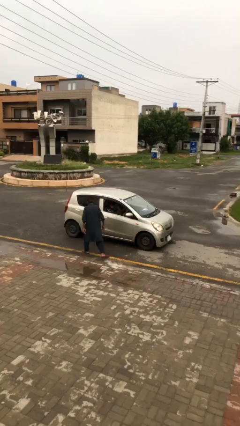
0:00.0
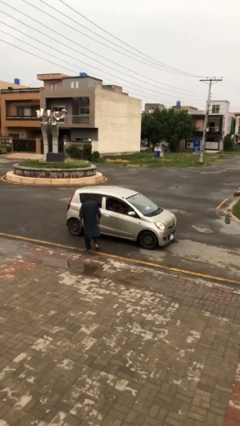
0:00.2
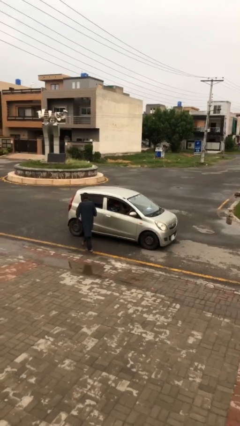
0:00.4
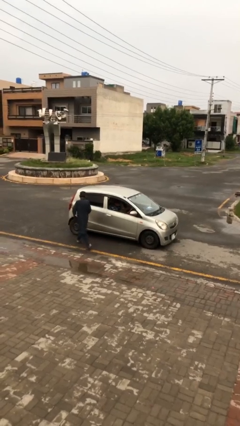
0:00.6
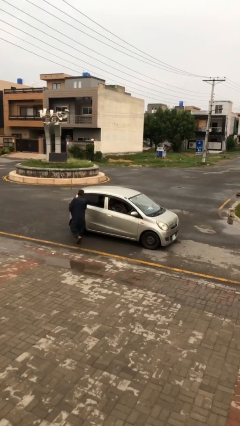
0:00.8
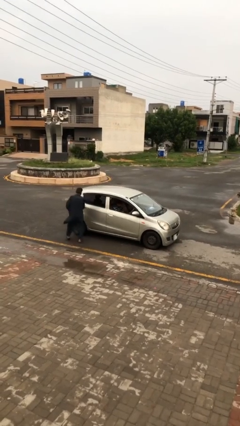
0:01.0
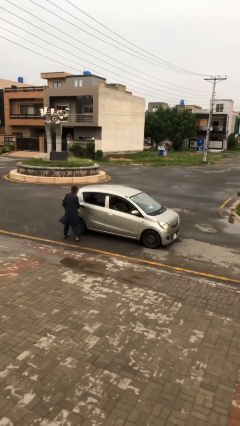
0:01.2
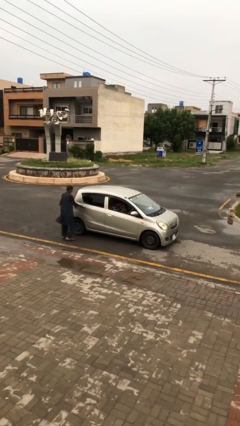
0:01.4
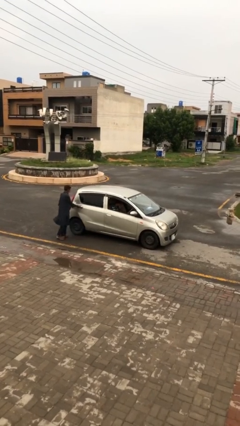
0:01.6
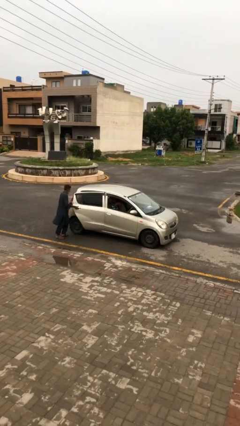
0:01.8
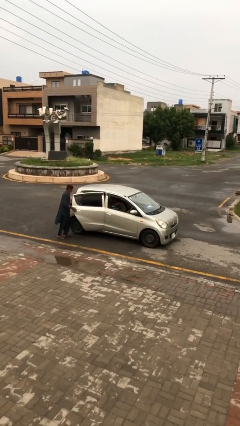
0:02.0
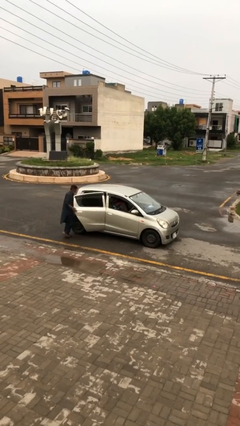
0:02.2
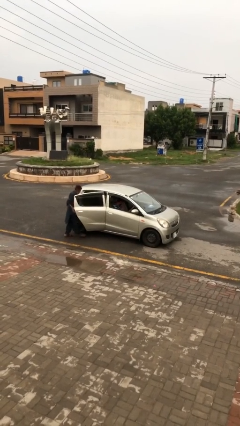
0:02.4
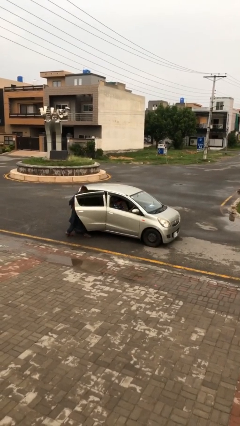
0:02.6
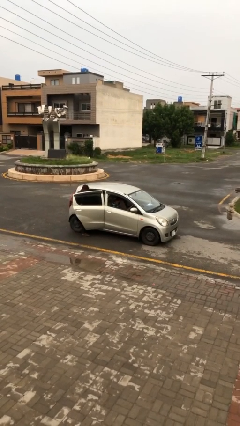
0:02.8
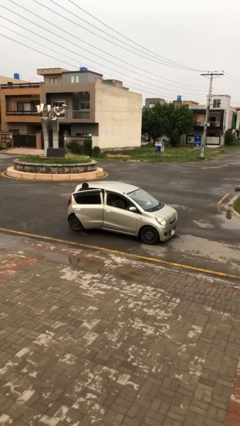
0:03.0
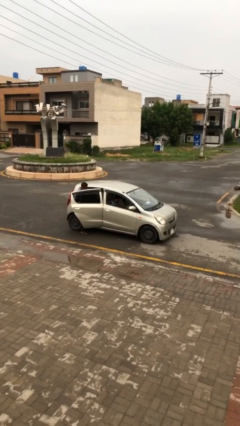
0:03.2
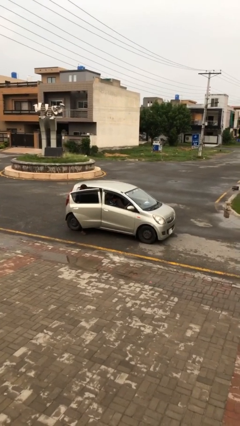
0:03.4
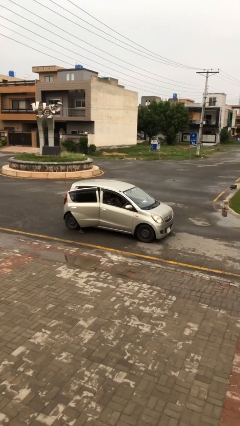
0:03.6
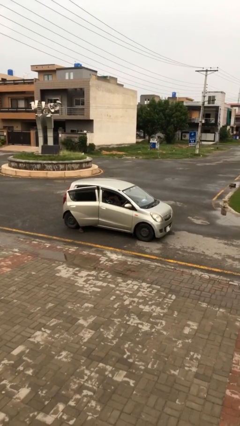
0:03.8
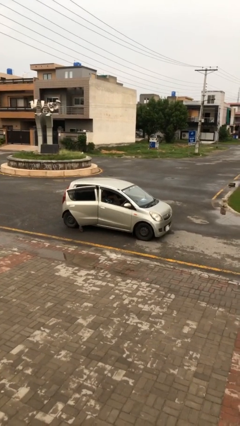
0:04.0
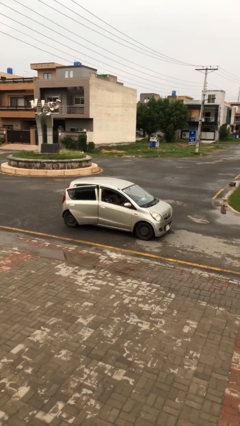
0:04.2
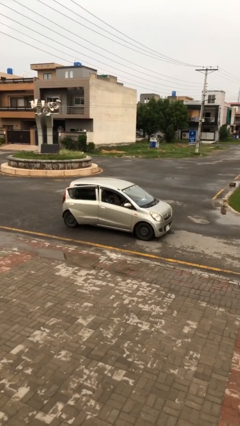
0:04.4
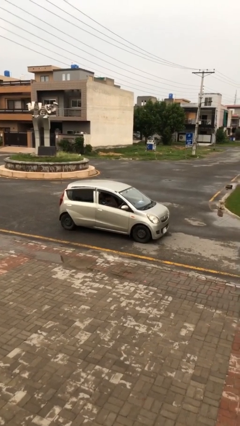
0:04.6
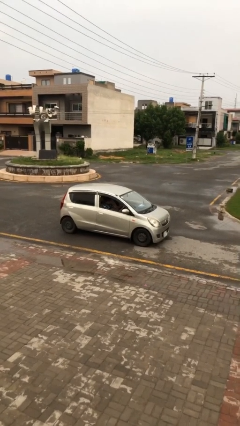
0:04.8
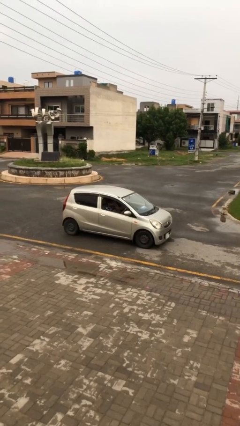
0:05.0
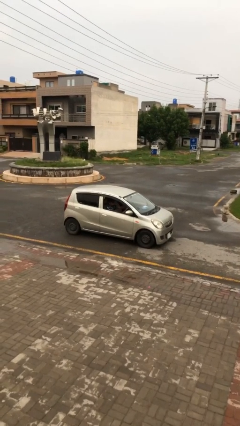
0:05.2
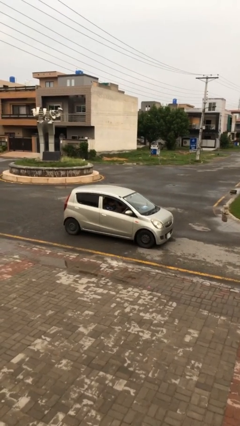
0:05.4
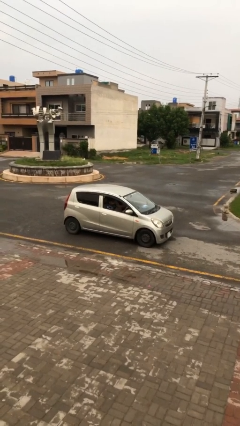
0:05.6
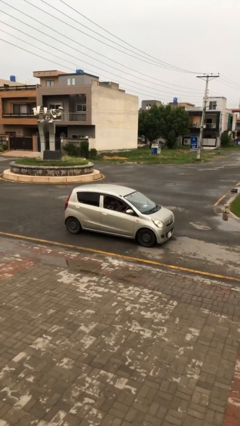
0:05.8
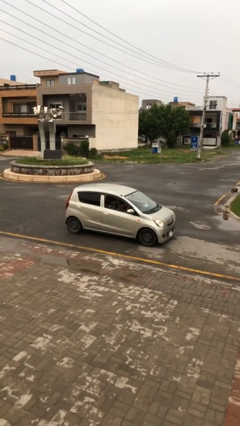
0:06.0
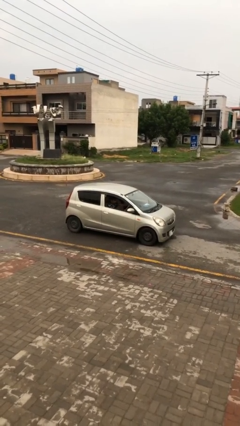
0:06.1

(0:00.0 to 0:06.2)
car picks up person

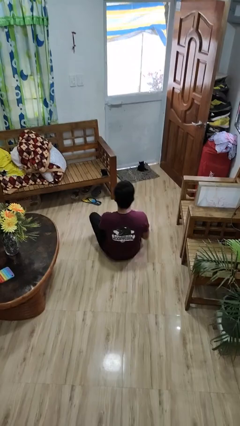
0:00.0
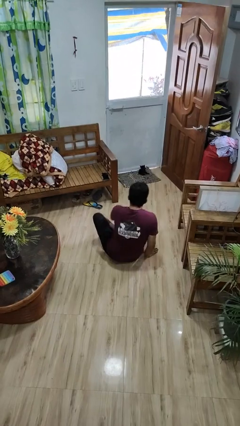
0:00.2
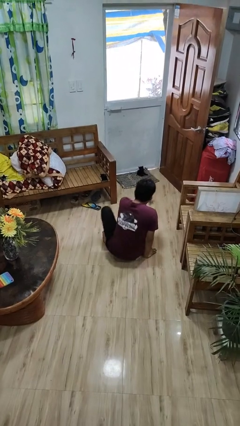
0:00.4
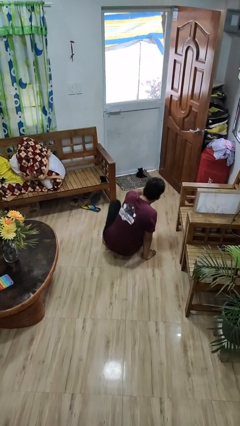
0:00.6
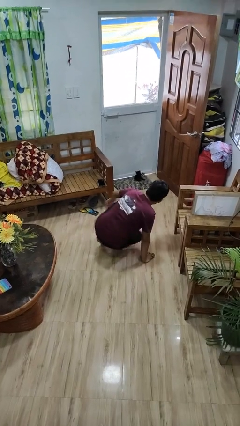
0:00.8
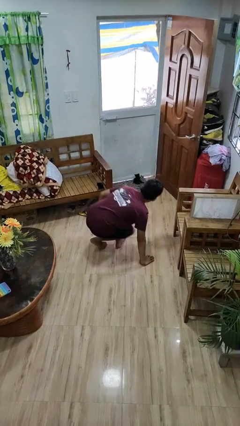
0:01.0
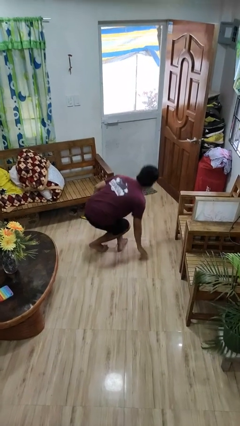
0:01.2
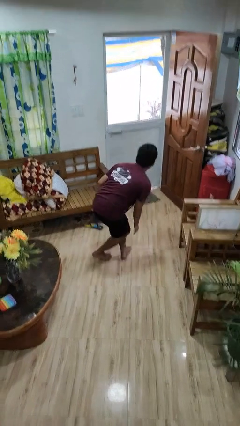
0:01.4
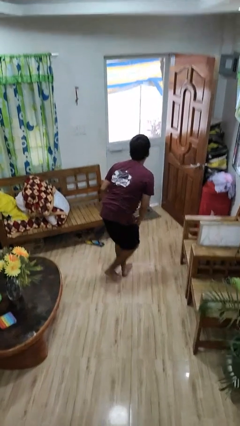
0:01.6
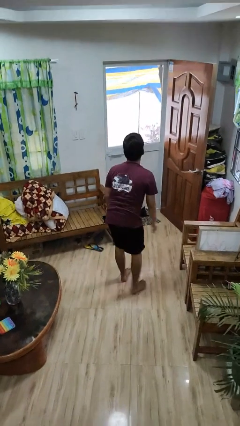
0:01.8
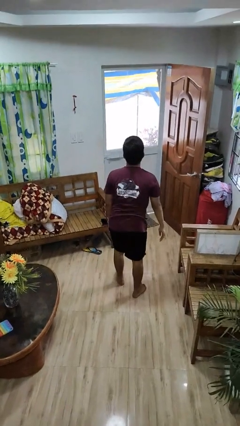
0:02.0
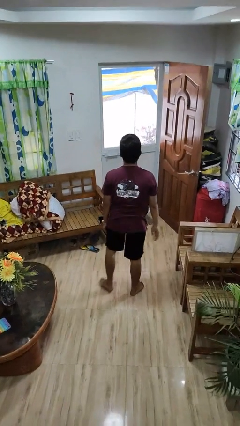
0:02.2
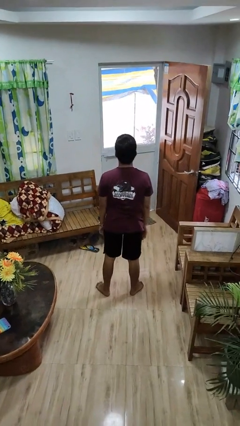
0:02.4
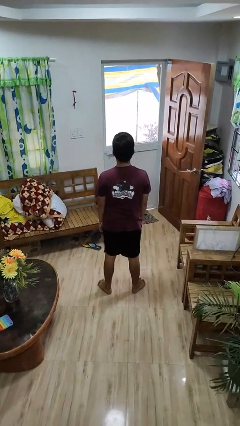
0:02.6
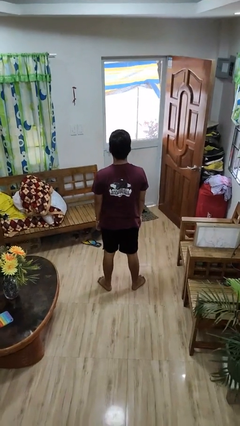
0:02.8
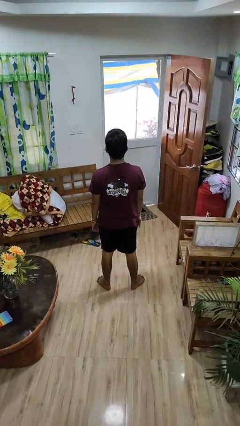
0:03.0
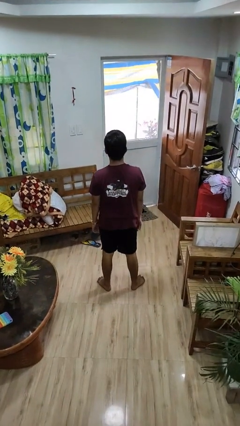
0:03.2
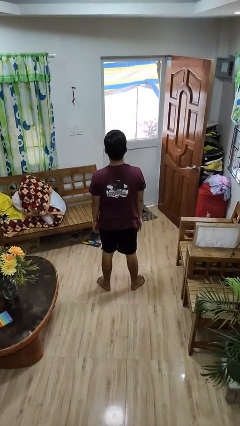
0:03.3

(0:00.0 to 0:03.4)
person stands up from floor

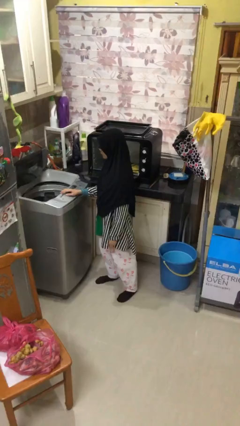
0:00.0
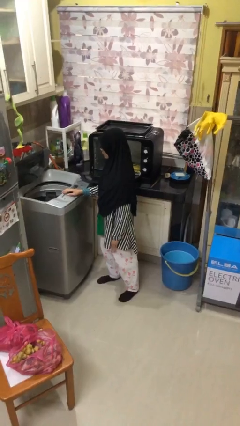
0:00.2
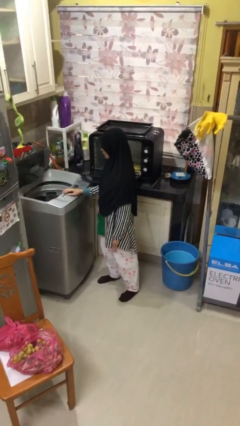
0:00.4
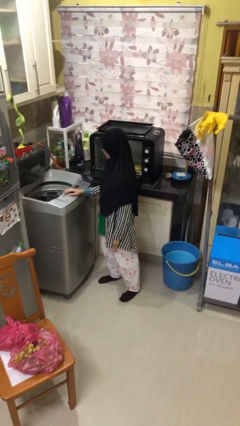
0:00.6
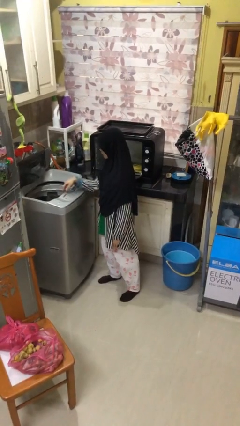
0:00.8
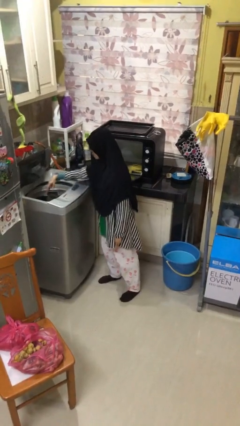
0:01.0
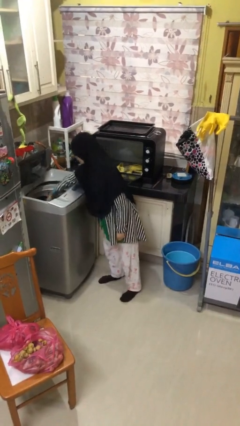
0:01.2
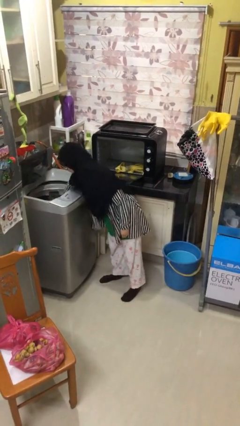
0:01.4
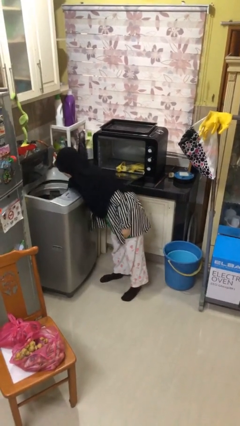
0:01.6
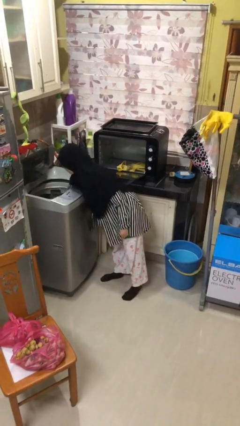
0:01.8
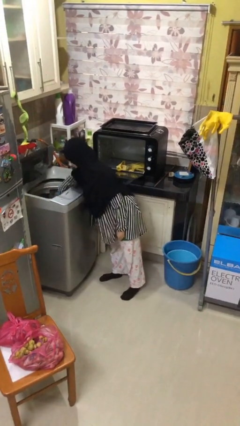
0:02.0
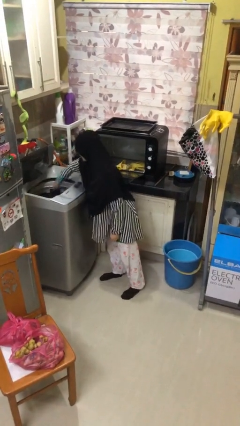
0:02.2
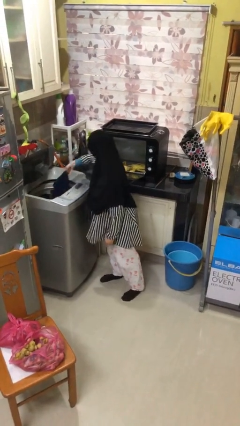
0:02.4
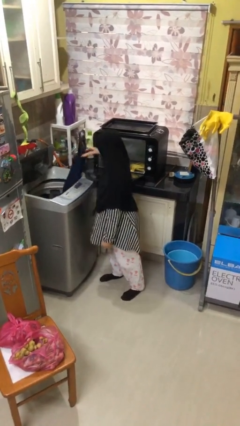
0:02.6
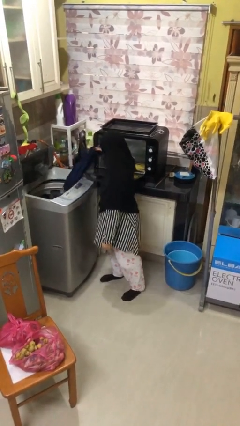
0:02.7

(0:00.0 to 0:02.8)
person unloads clotheswasher

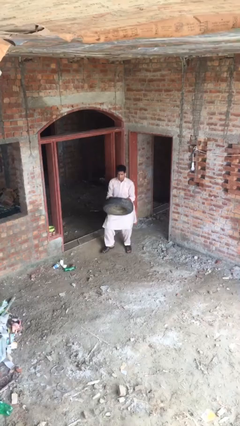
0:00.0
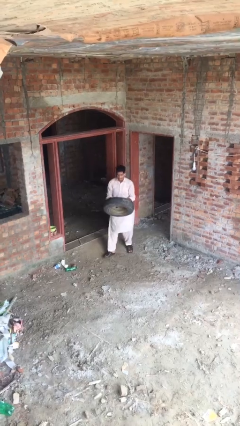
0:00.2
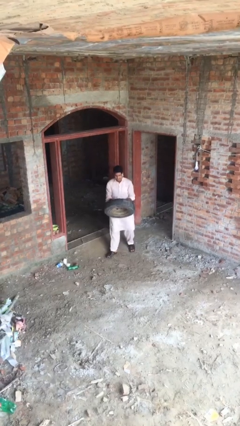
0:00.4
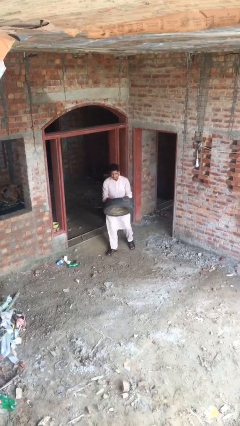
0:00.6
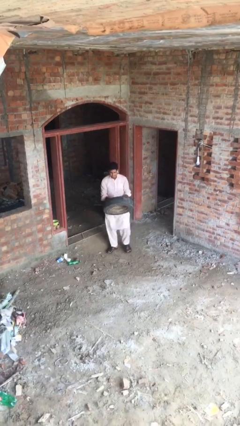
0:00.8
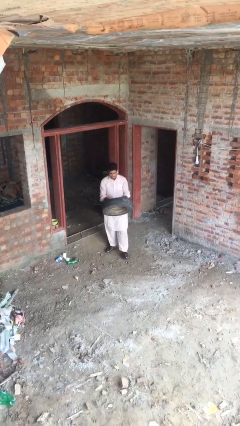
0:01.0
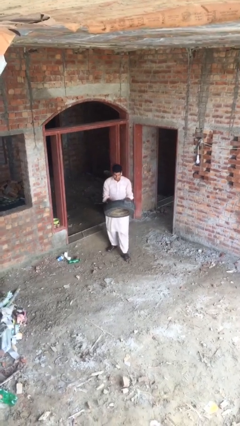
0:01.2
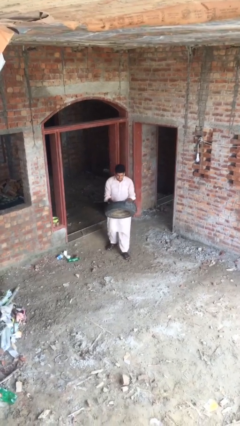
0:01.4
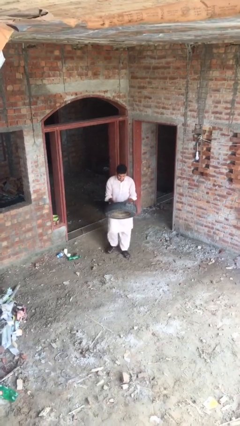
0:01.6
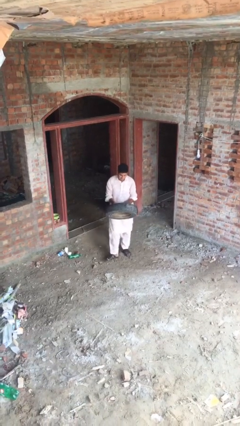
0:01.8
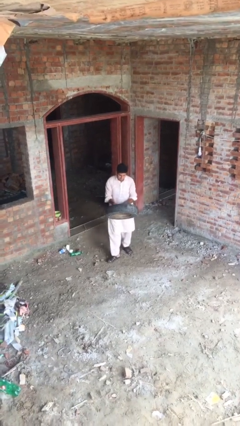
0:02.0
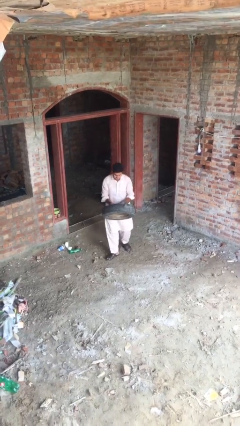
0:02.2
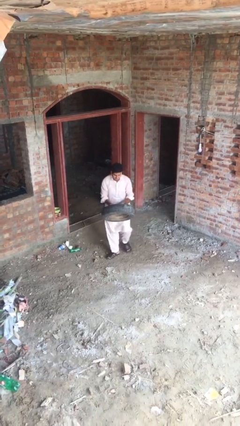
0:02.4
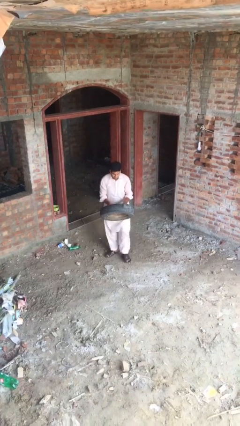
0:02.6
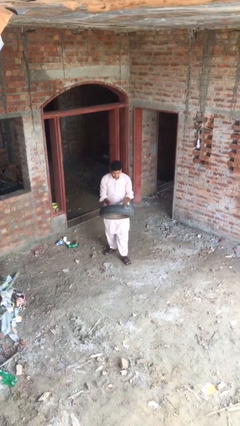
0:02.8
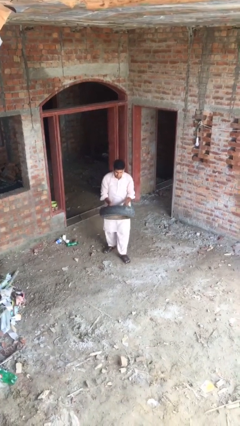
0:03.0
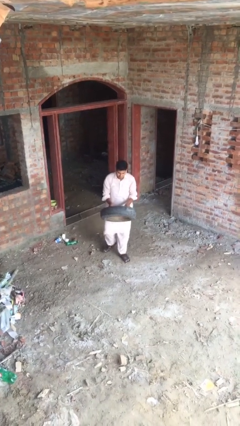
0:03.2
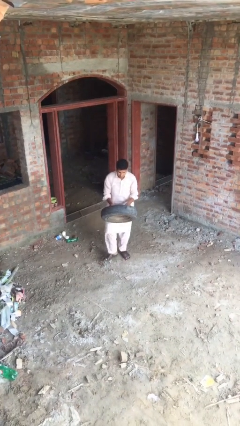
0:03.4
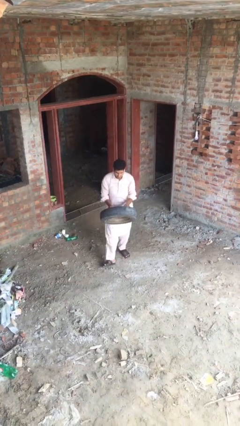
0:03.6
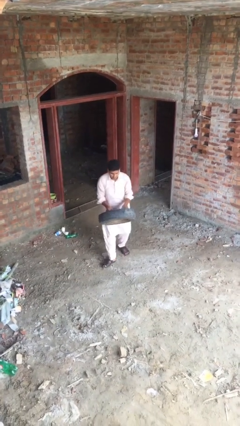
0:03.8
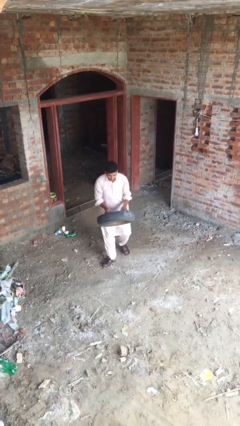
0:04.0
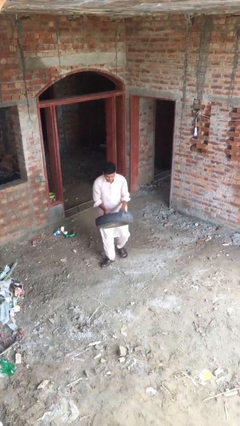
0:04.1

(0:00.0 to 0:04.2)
person carries heavy object

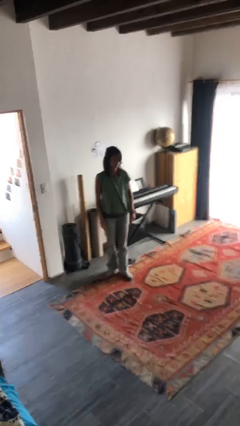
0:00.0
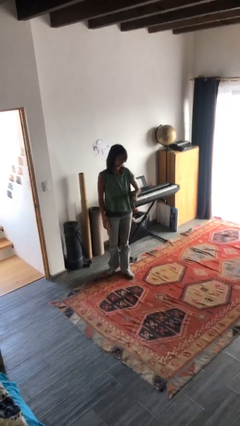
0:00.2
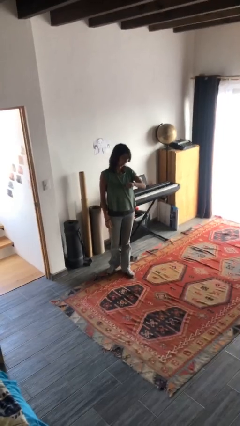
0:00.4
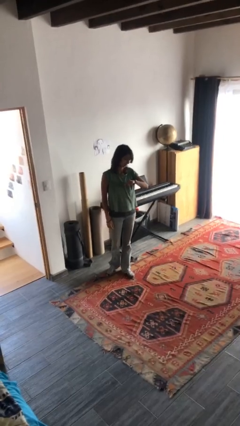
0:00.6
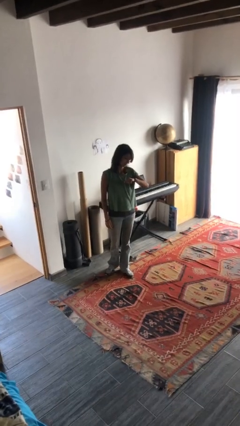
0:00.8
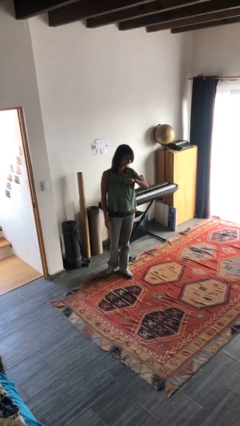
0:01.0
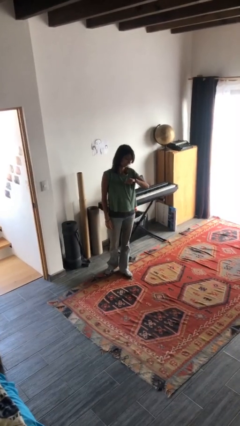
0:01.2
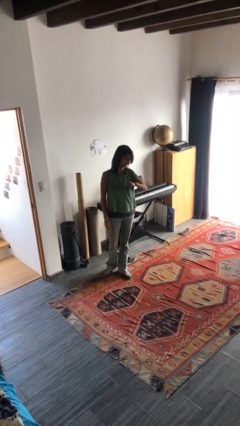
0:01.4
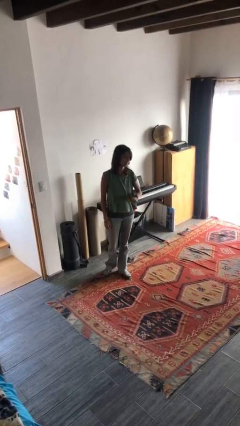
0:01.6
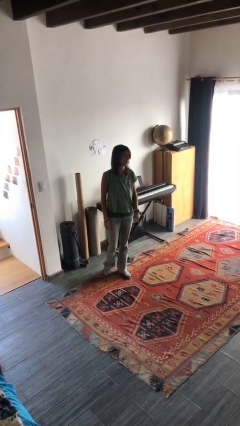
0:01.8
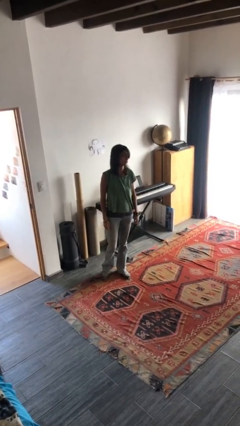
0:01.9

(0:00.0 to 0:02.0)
person looks at wristwatch
